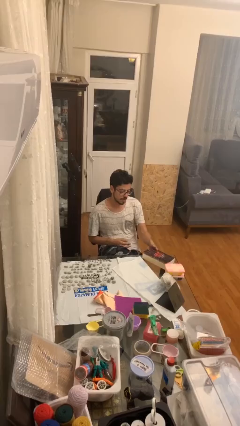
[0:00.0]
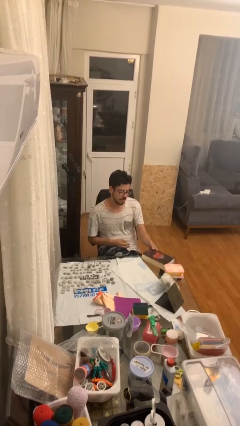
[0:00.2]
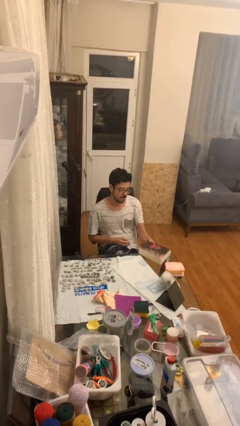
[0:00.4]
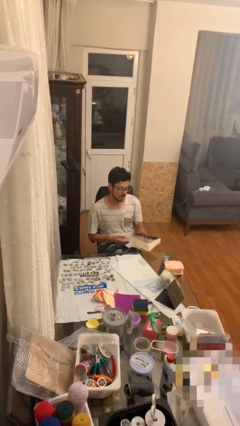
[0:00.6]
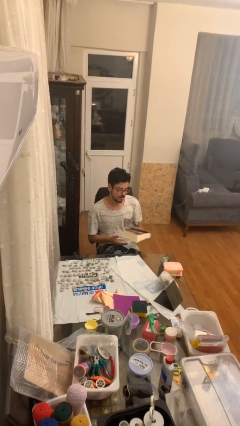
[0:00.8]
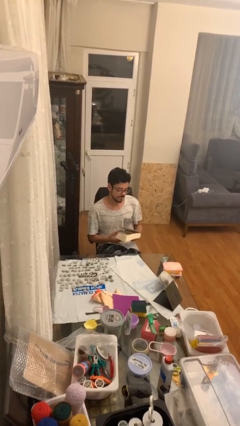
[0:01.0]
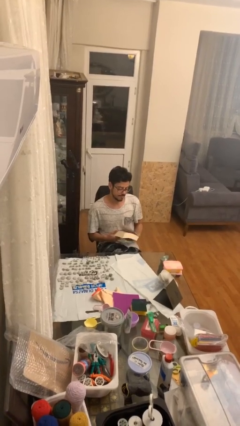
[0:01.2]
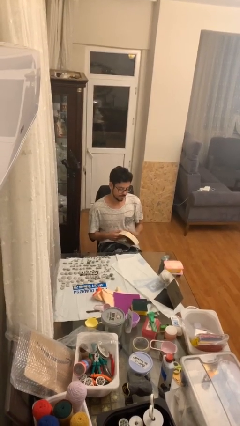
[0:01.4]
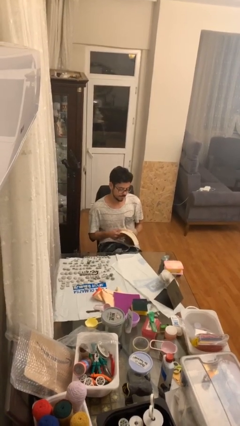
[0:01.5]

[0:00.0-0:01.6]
person picks up object from table

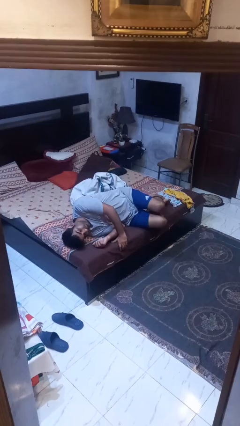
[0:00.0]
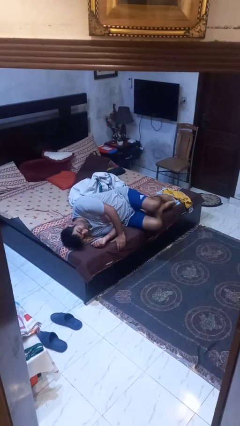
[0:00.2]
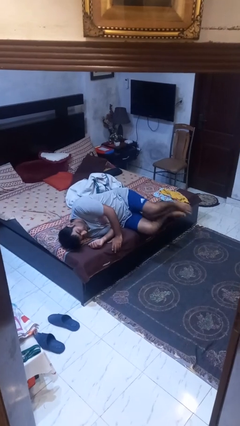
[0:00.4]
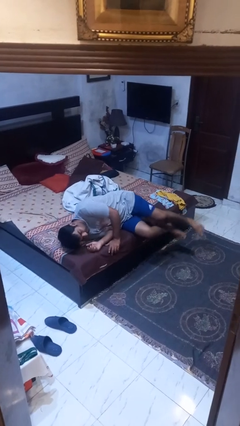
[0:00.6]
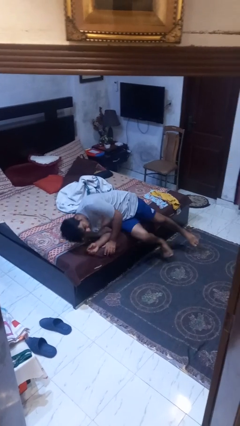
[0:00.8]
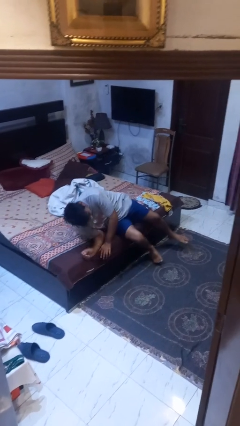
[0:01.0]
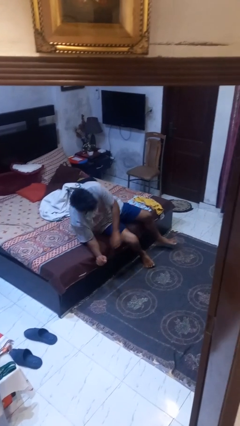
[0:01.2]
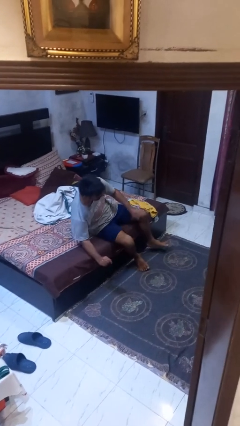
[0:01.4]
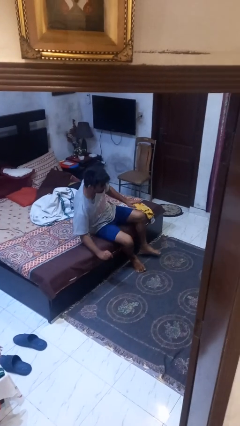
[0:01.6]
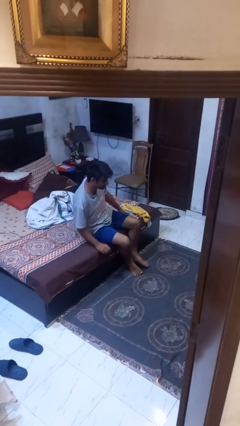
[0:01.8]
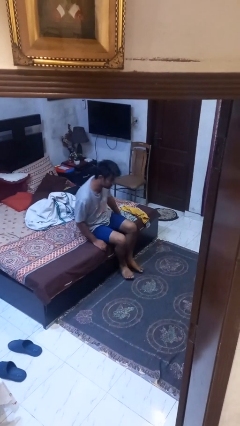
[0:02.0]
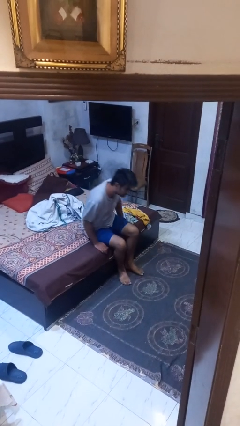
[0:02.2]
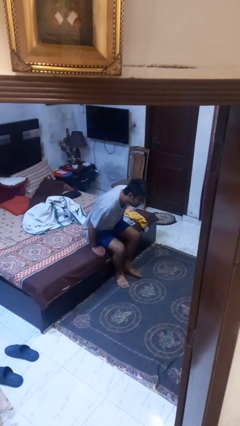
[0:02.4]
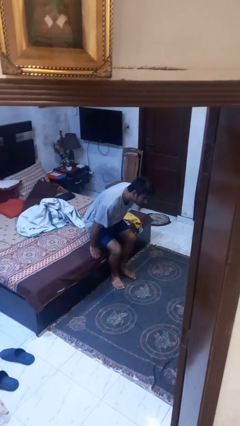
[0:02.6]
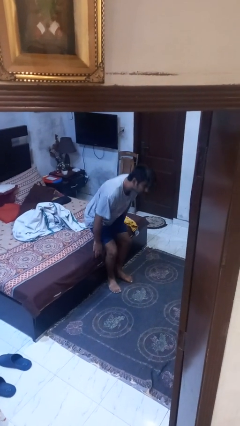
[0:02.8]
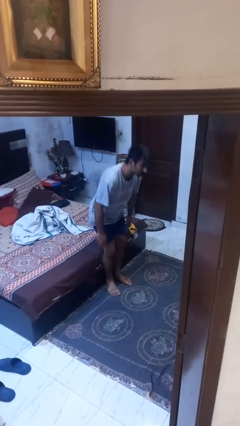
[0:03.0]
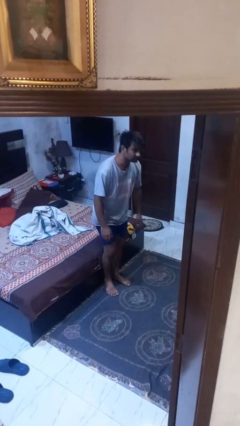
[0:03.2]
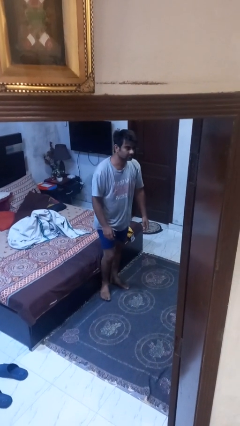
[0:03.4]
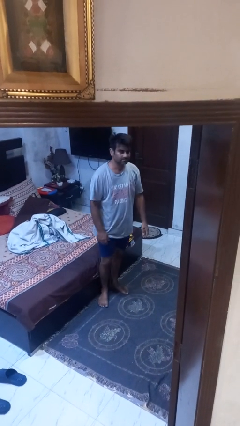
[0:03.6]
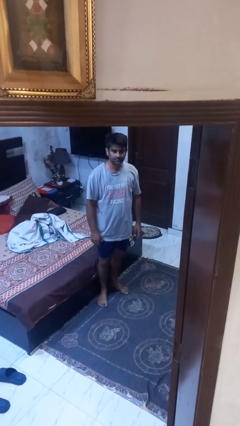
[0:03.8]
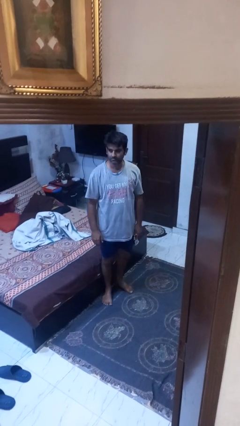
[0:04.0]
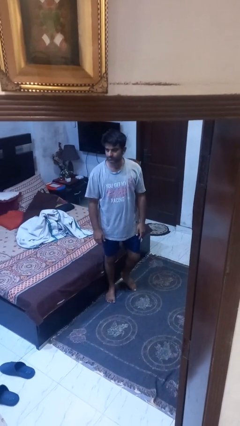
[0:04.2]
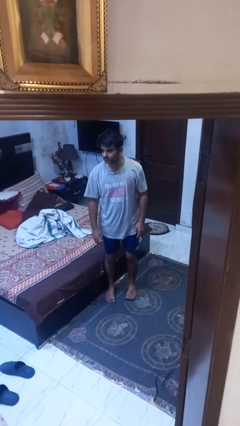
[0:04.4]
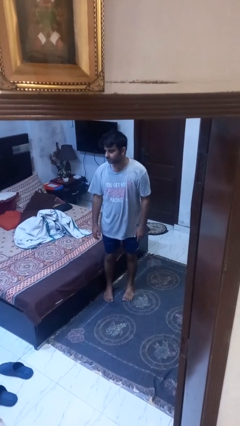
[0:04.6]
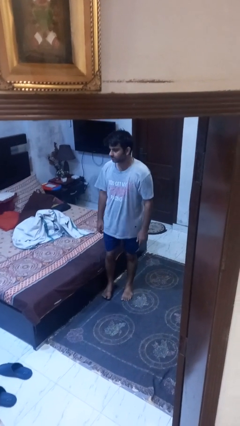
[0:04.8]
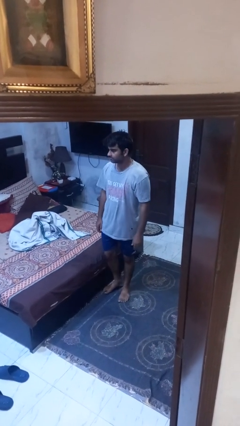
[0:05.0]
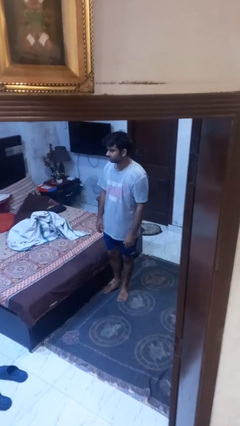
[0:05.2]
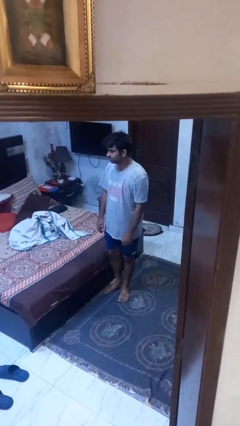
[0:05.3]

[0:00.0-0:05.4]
person stands up

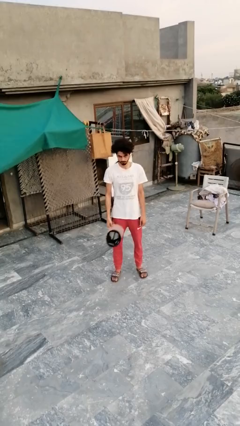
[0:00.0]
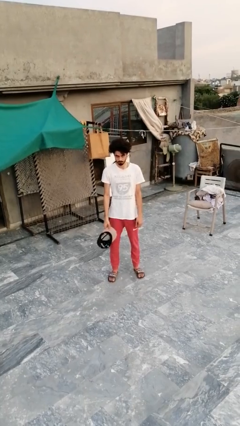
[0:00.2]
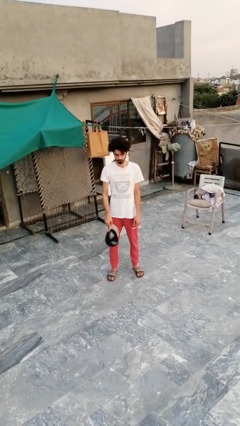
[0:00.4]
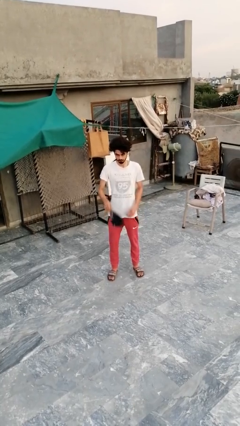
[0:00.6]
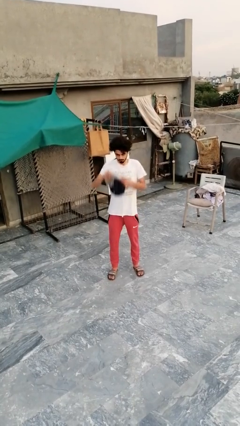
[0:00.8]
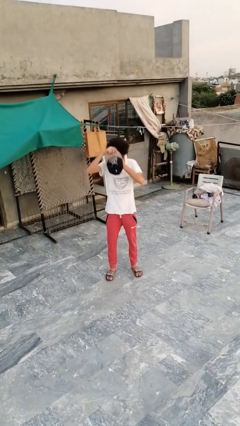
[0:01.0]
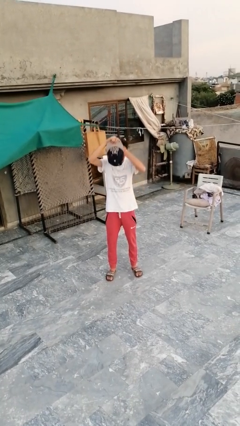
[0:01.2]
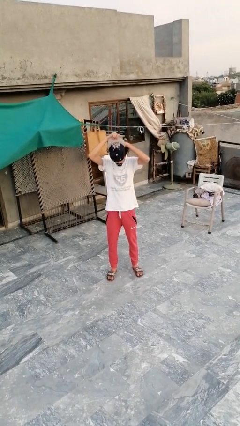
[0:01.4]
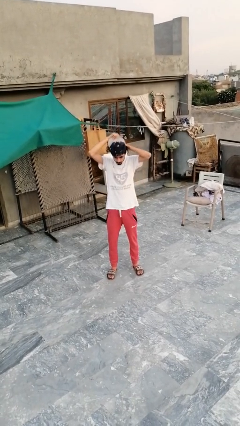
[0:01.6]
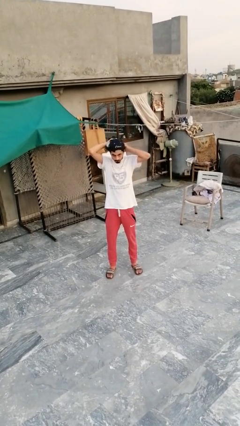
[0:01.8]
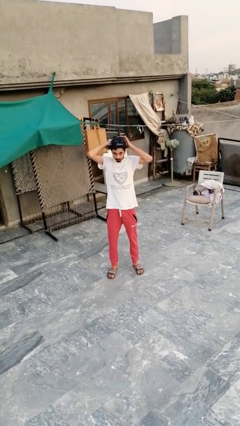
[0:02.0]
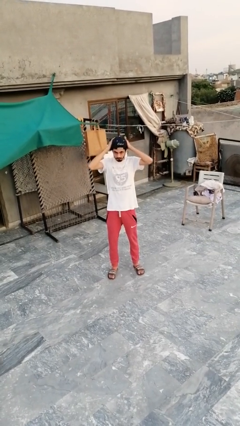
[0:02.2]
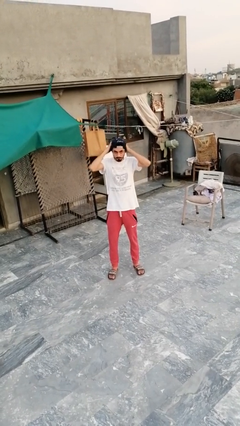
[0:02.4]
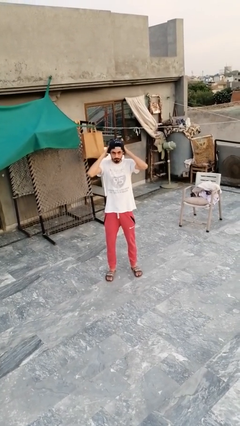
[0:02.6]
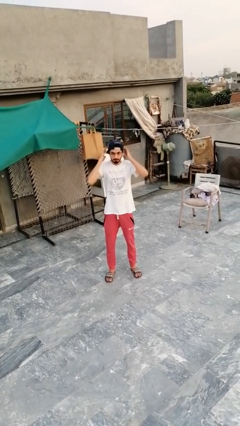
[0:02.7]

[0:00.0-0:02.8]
person puts on hat

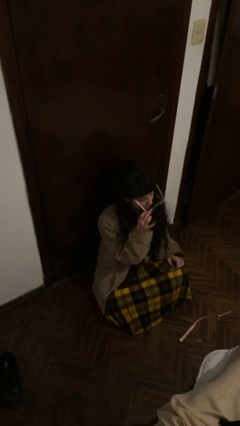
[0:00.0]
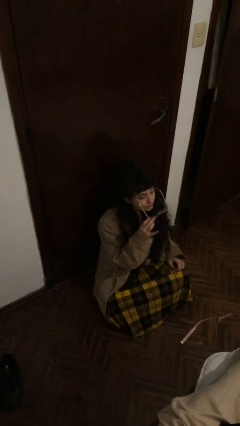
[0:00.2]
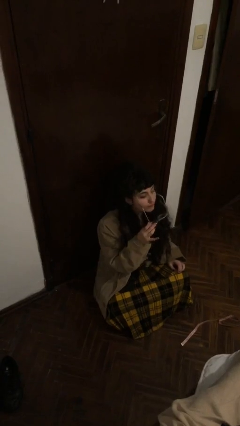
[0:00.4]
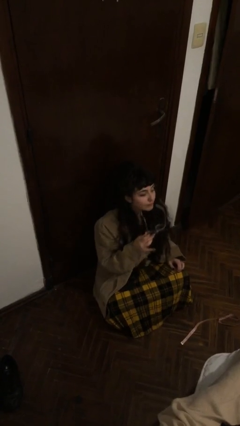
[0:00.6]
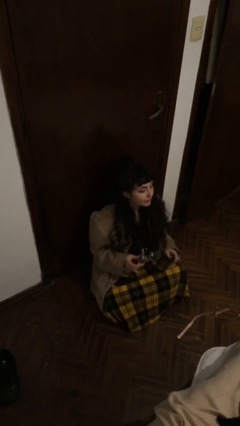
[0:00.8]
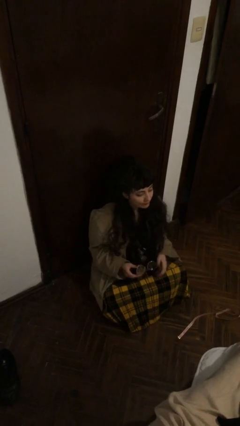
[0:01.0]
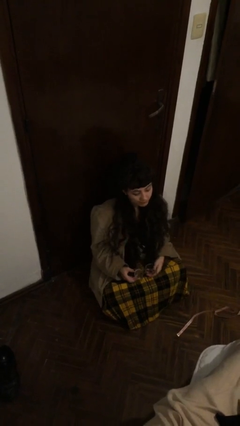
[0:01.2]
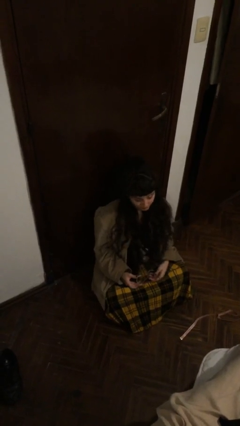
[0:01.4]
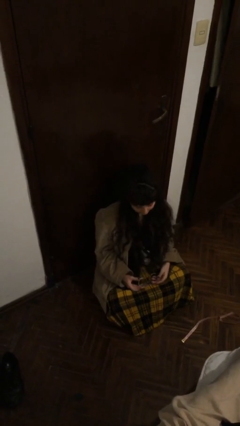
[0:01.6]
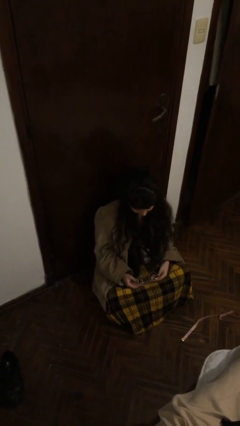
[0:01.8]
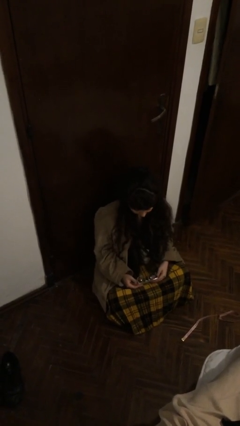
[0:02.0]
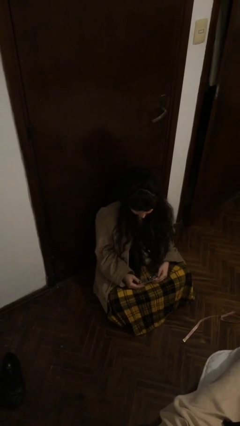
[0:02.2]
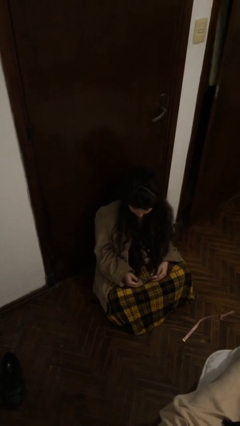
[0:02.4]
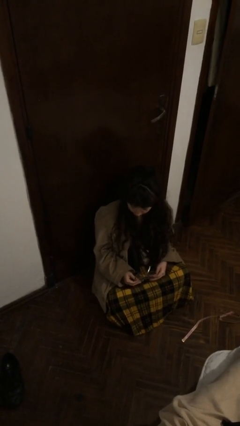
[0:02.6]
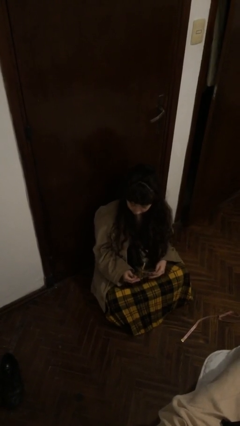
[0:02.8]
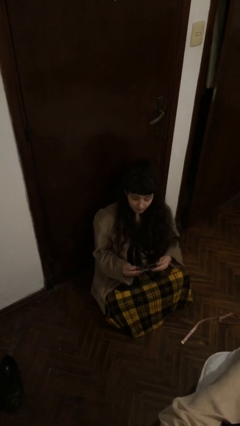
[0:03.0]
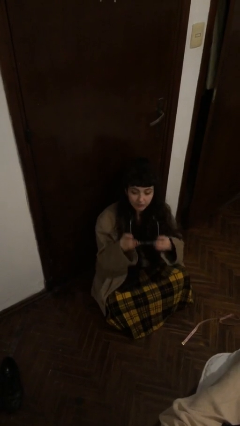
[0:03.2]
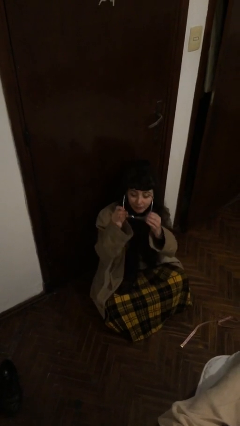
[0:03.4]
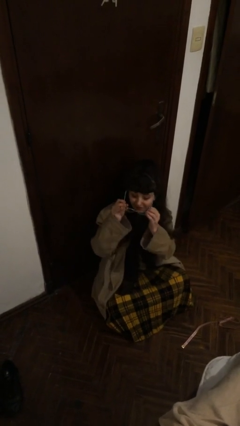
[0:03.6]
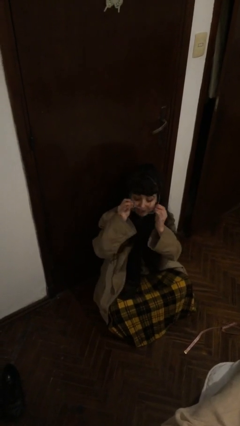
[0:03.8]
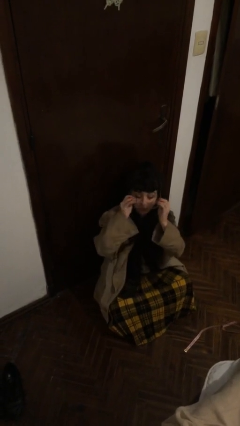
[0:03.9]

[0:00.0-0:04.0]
person takes off glasses

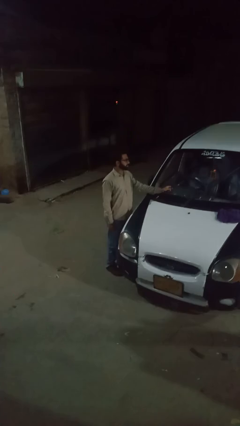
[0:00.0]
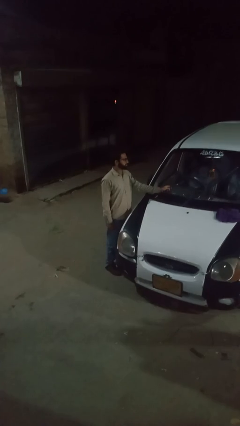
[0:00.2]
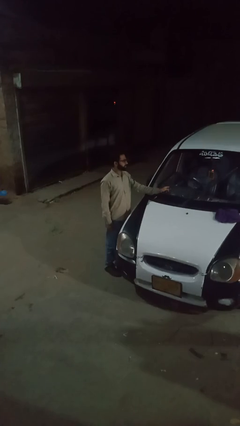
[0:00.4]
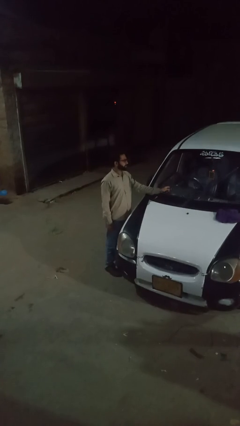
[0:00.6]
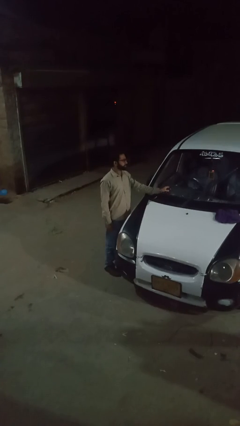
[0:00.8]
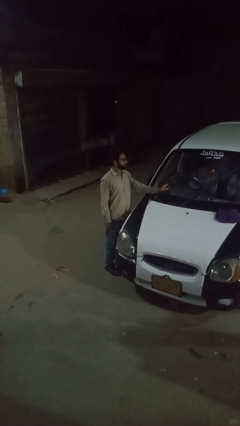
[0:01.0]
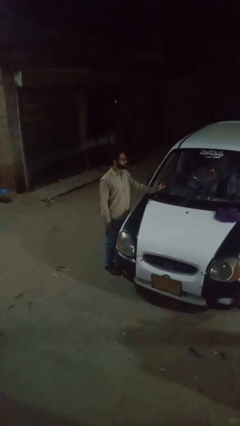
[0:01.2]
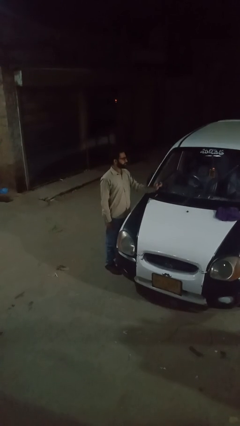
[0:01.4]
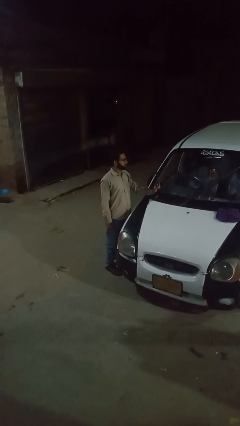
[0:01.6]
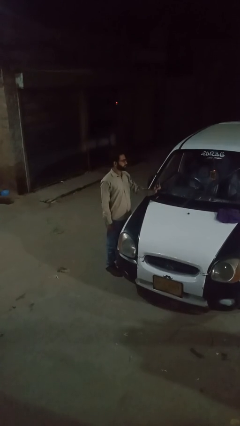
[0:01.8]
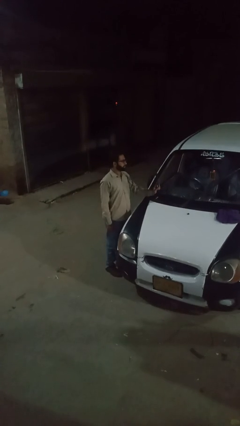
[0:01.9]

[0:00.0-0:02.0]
person flips up car wipers

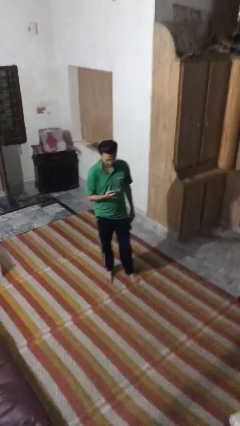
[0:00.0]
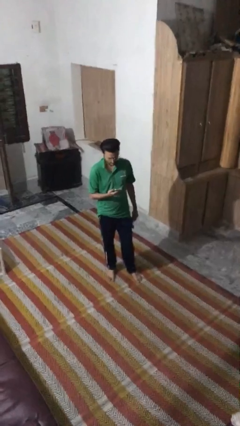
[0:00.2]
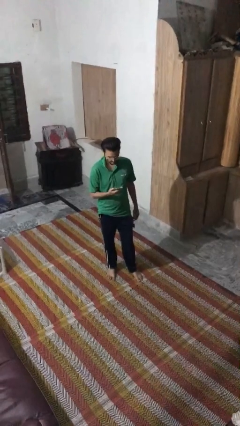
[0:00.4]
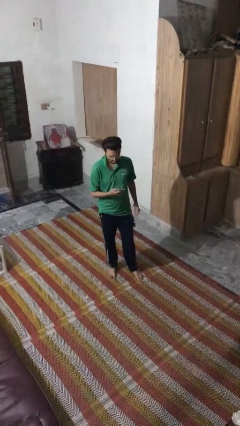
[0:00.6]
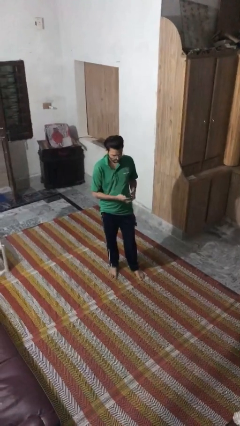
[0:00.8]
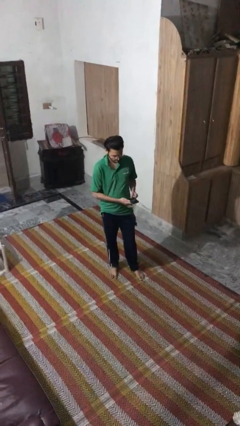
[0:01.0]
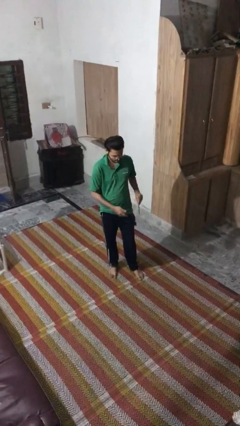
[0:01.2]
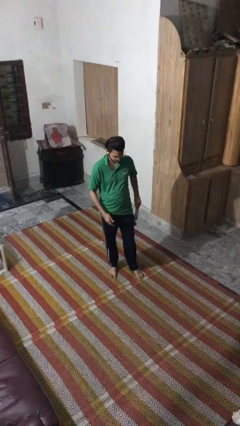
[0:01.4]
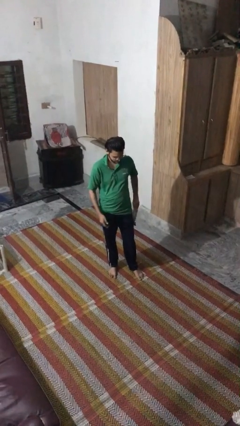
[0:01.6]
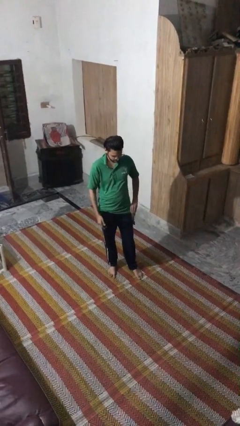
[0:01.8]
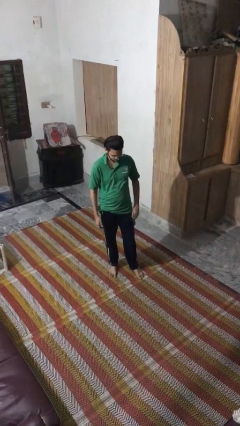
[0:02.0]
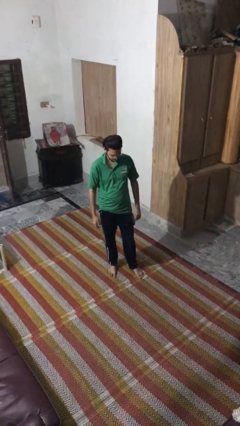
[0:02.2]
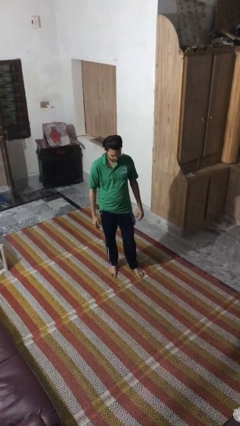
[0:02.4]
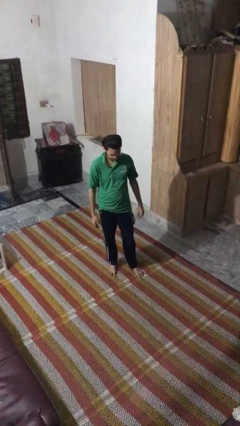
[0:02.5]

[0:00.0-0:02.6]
person puts phone into pocket
